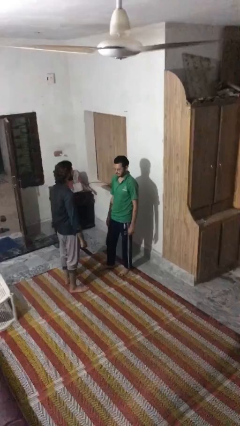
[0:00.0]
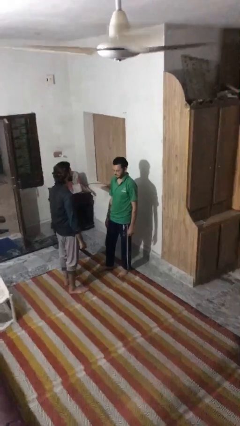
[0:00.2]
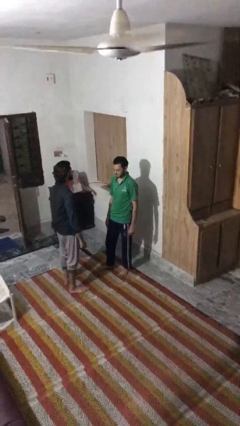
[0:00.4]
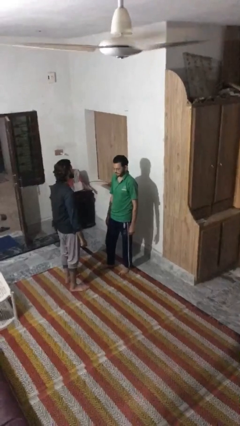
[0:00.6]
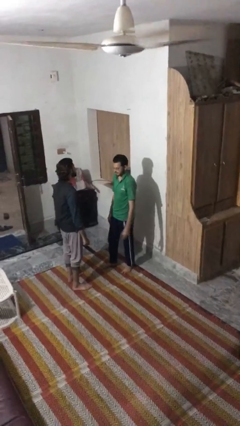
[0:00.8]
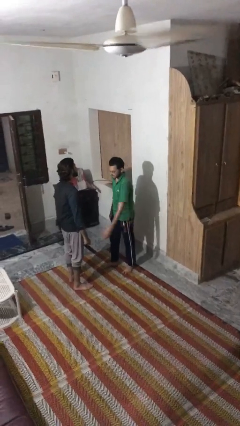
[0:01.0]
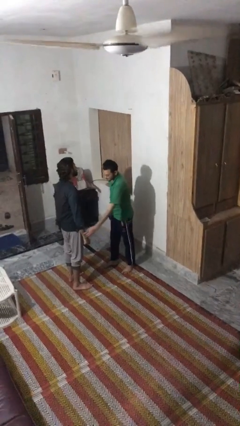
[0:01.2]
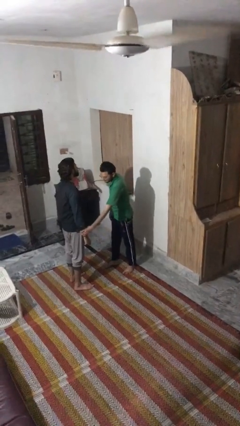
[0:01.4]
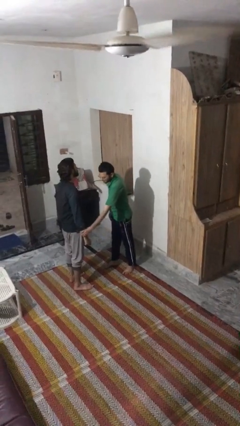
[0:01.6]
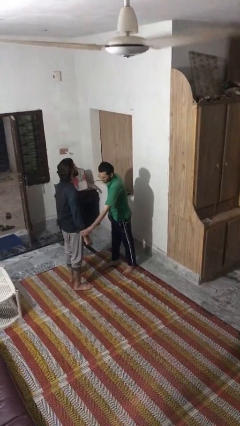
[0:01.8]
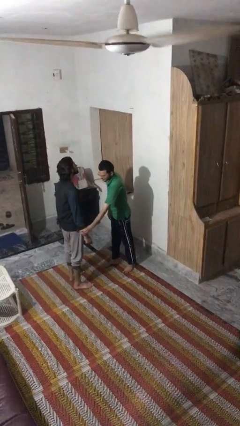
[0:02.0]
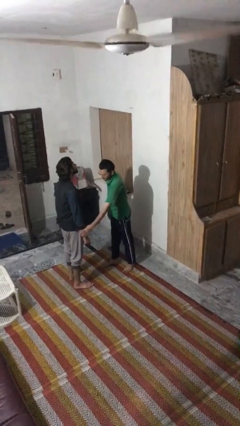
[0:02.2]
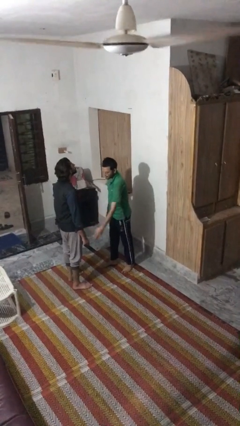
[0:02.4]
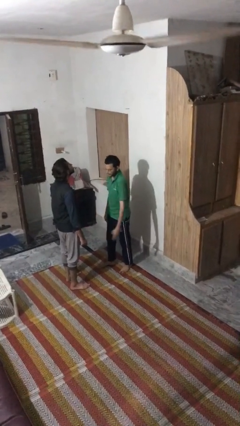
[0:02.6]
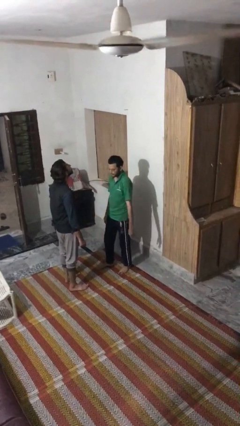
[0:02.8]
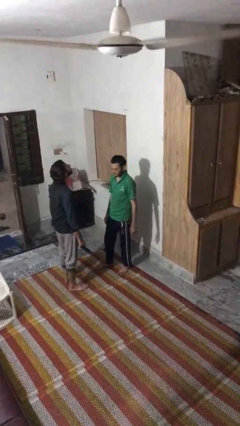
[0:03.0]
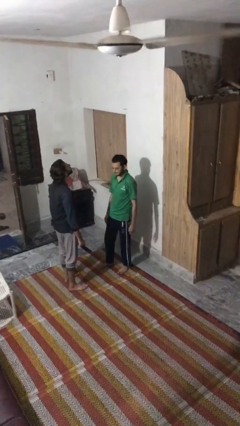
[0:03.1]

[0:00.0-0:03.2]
person grabs person by forearm

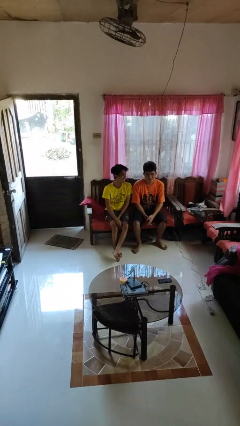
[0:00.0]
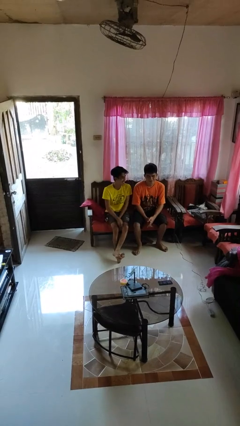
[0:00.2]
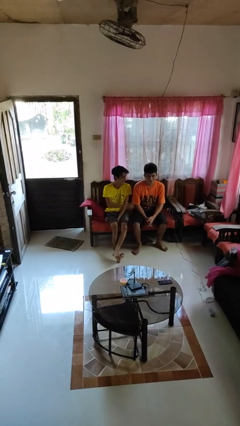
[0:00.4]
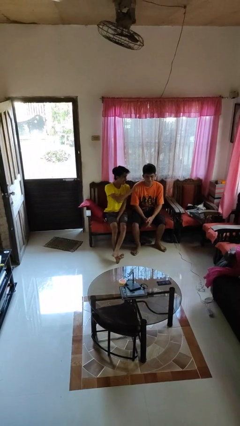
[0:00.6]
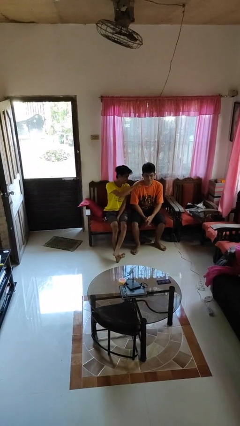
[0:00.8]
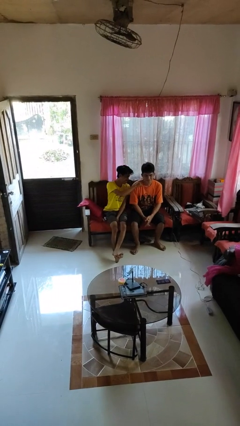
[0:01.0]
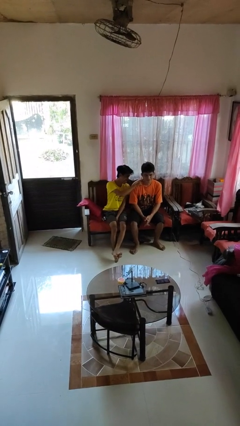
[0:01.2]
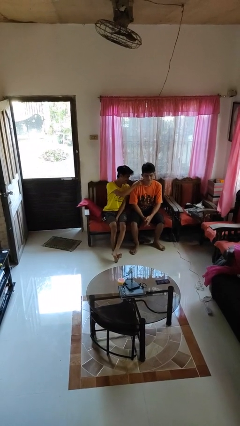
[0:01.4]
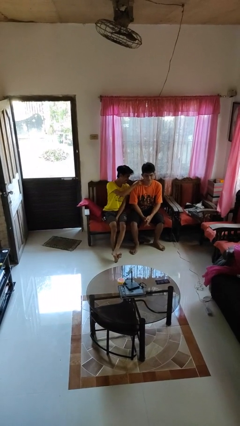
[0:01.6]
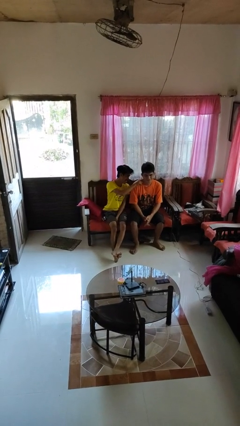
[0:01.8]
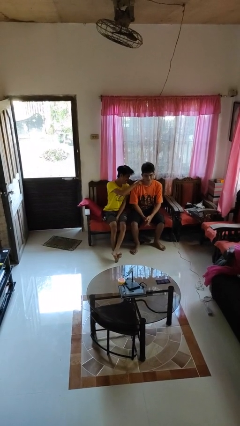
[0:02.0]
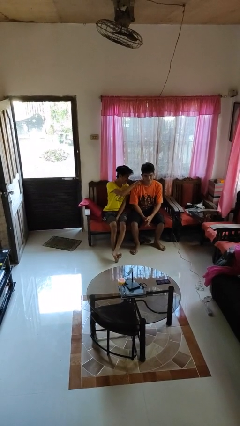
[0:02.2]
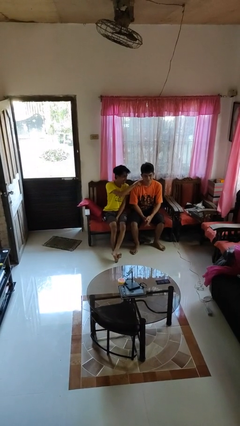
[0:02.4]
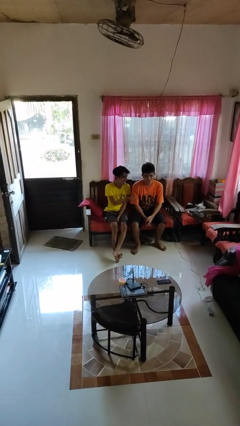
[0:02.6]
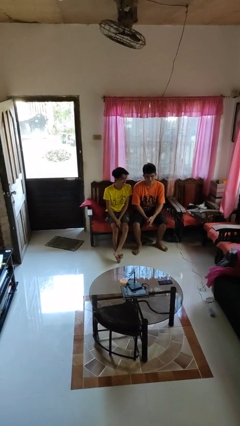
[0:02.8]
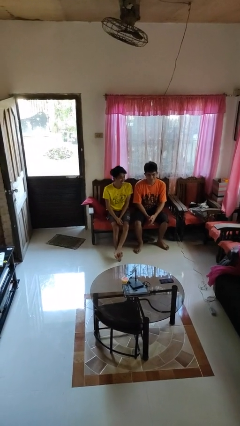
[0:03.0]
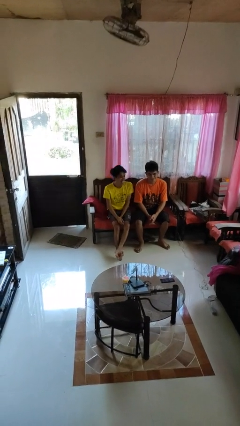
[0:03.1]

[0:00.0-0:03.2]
person touches face of person

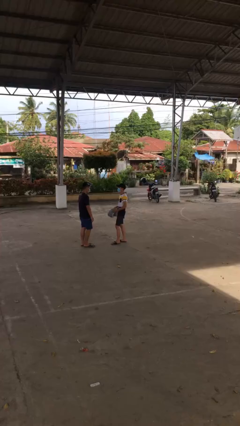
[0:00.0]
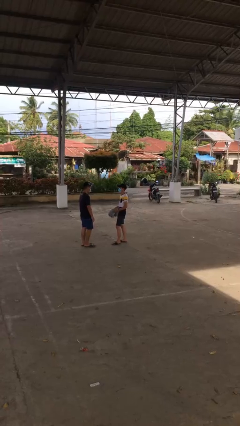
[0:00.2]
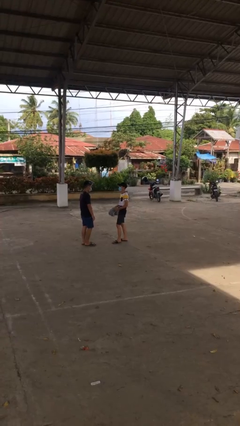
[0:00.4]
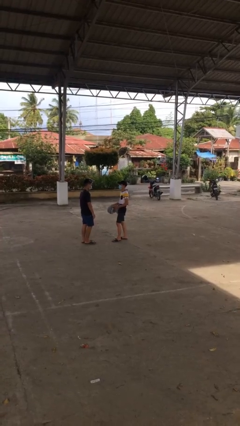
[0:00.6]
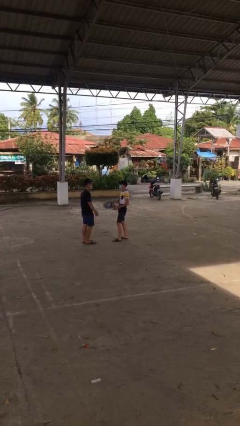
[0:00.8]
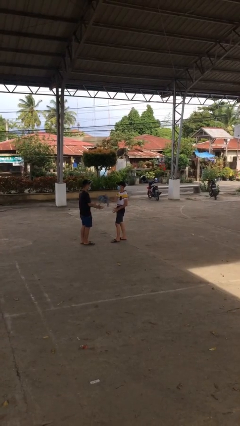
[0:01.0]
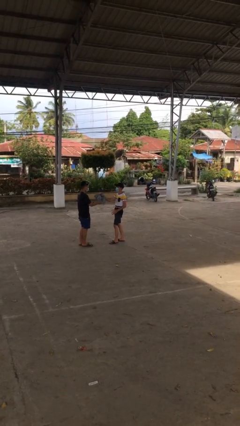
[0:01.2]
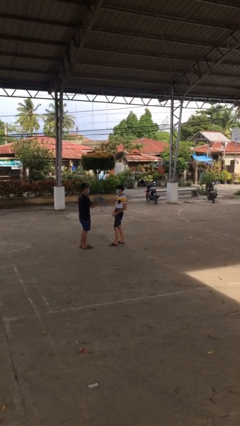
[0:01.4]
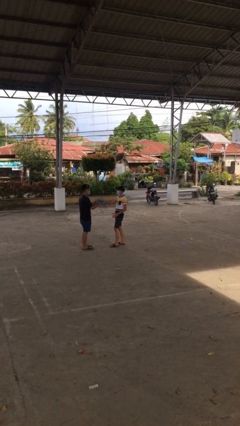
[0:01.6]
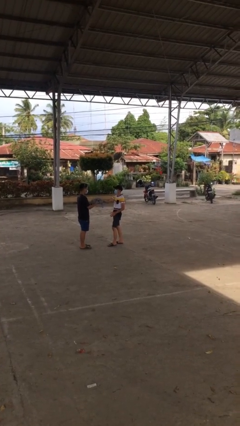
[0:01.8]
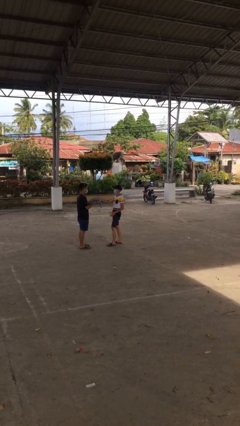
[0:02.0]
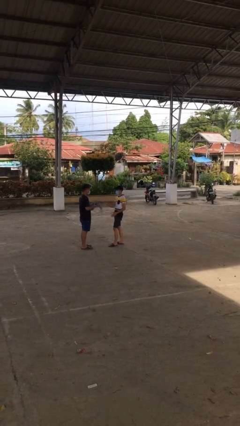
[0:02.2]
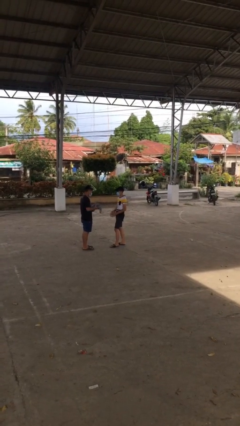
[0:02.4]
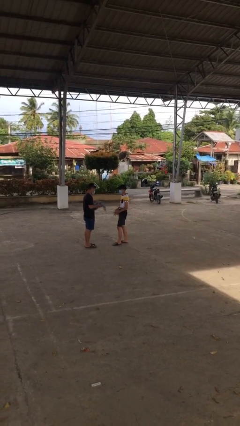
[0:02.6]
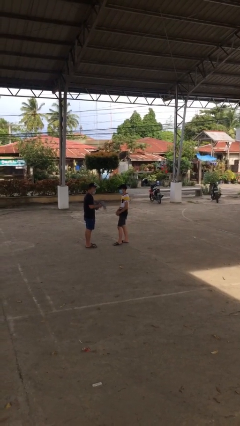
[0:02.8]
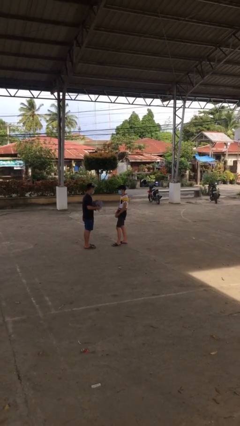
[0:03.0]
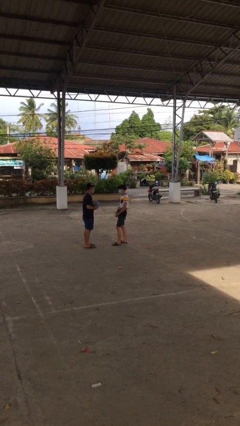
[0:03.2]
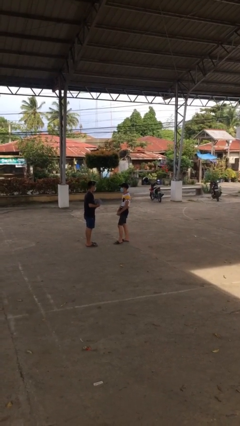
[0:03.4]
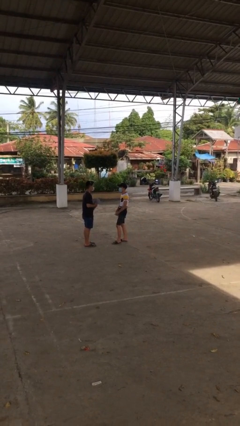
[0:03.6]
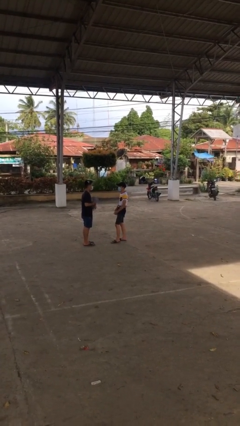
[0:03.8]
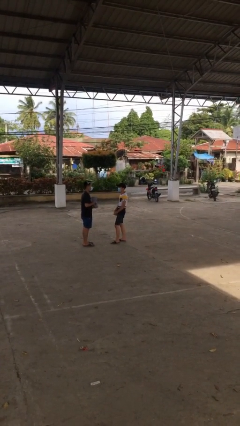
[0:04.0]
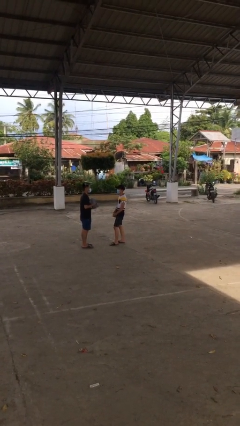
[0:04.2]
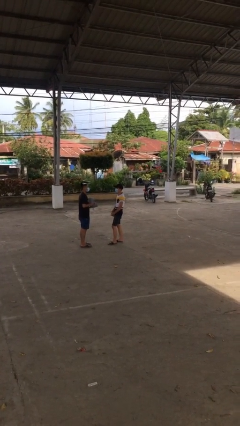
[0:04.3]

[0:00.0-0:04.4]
person transfers object to person

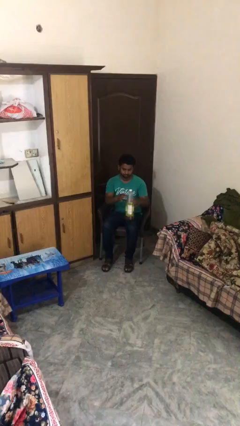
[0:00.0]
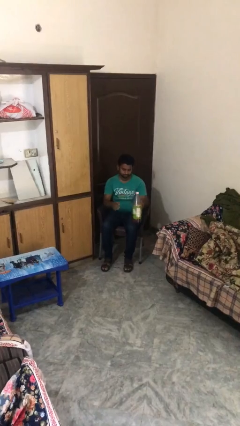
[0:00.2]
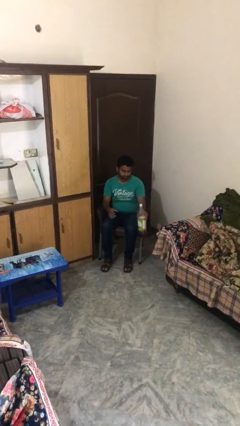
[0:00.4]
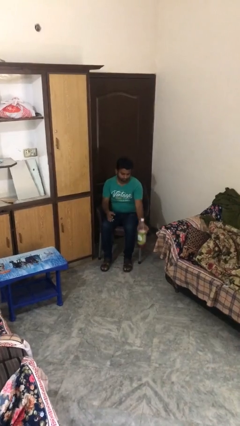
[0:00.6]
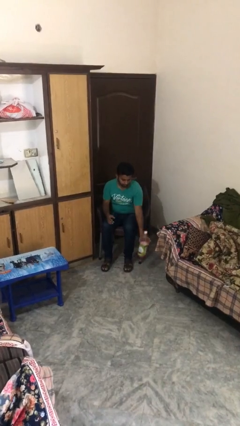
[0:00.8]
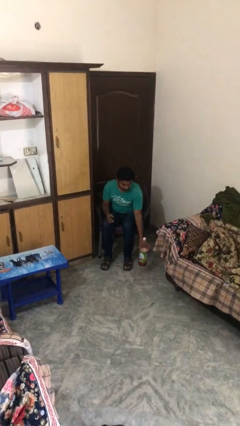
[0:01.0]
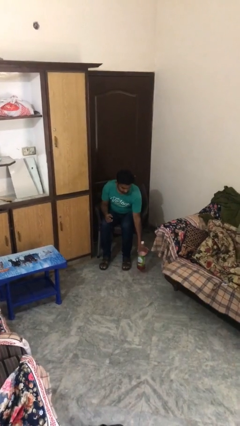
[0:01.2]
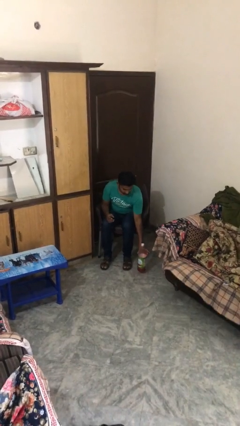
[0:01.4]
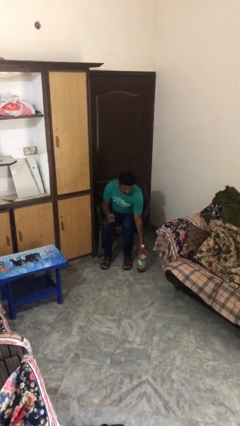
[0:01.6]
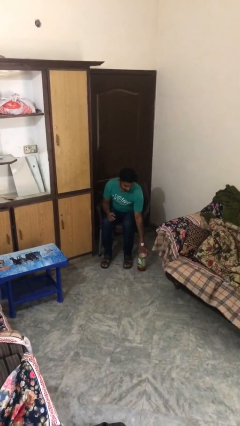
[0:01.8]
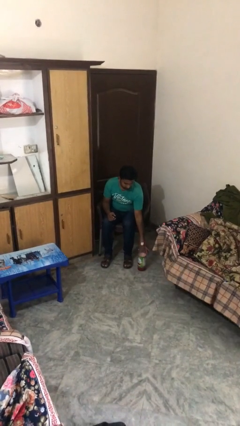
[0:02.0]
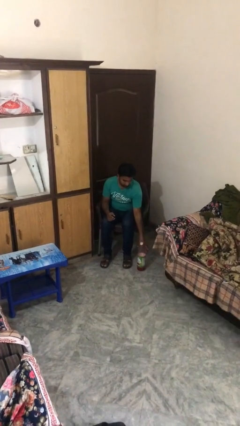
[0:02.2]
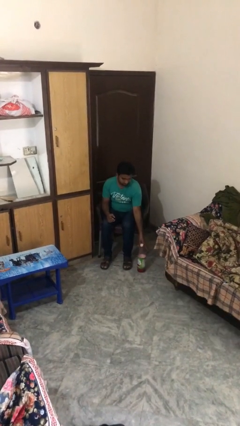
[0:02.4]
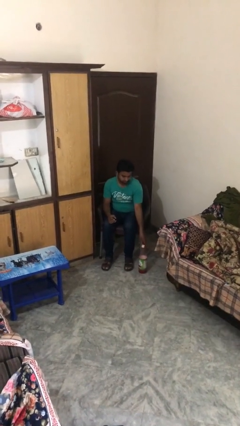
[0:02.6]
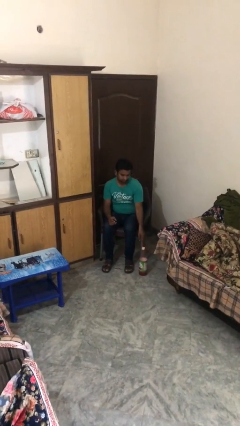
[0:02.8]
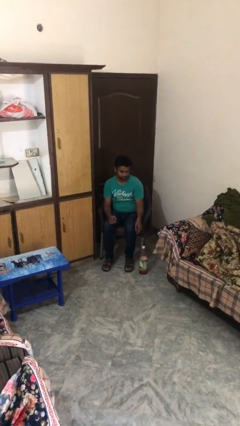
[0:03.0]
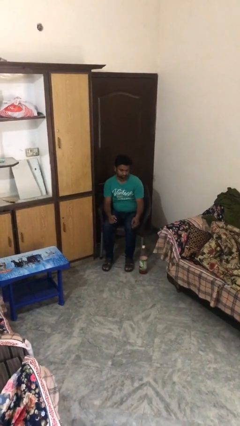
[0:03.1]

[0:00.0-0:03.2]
person puts down object on floor

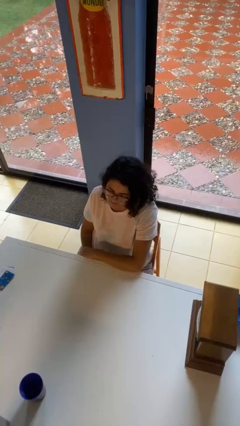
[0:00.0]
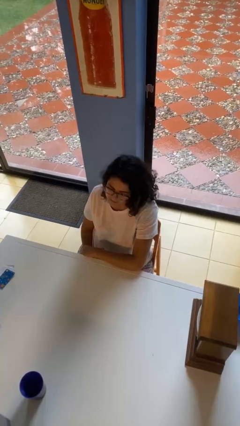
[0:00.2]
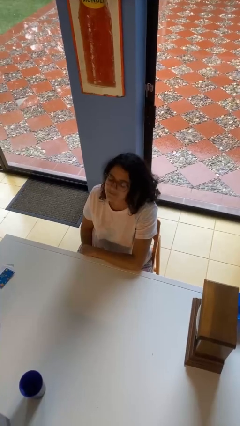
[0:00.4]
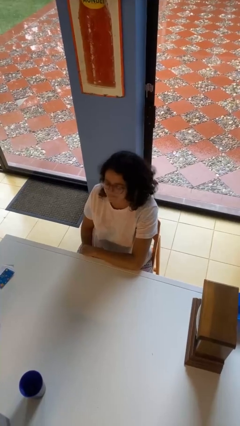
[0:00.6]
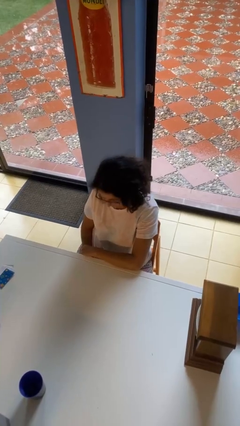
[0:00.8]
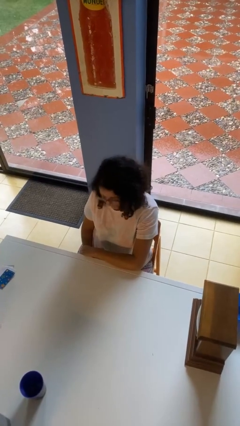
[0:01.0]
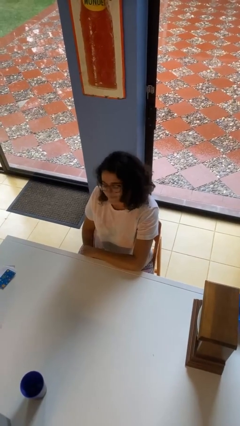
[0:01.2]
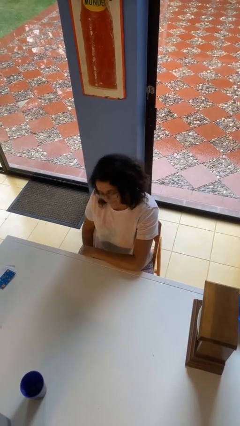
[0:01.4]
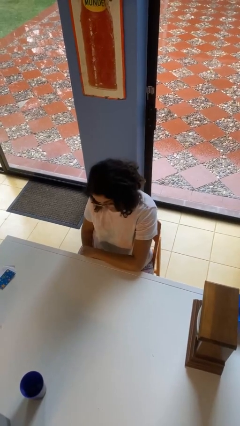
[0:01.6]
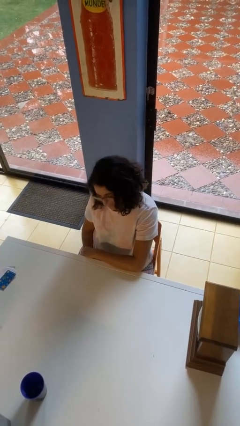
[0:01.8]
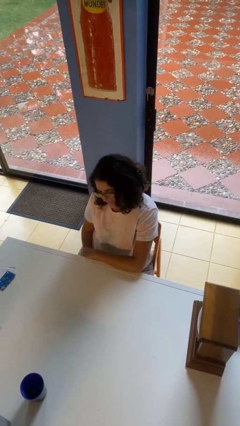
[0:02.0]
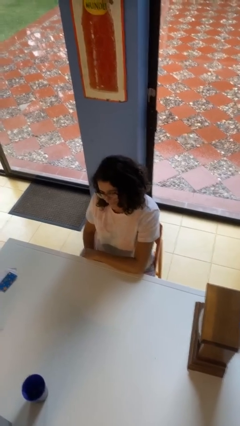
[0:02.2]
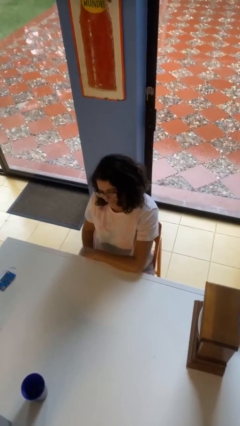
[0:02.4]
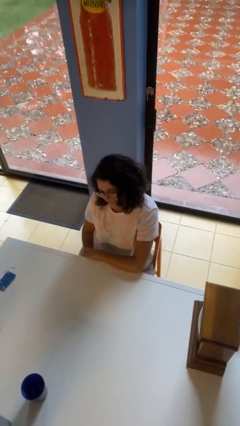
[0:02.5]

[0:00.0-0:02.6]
person nods head

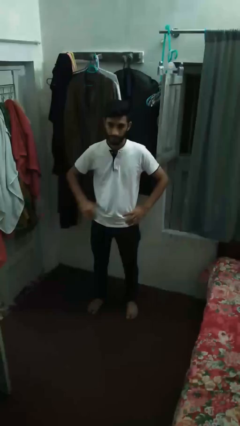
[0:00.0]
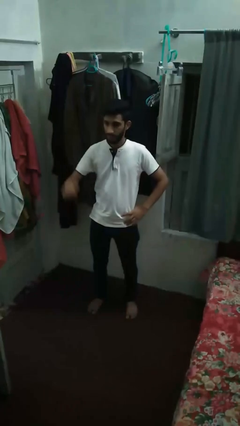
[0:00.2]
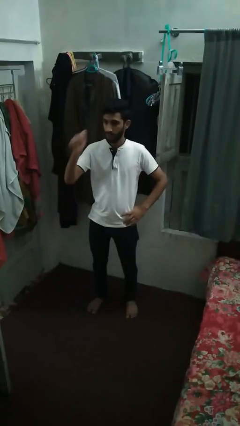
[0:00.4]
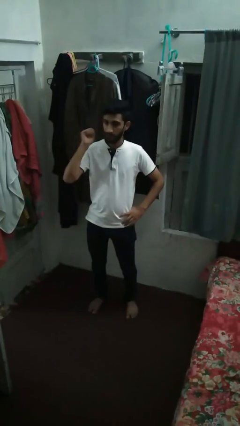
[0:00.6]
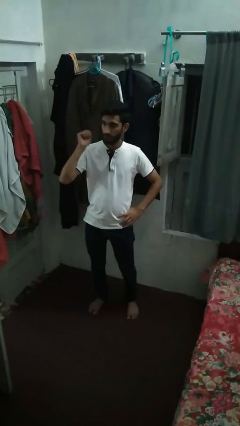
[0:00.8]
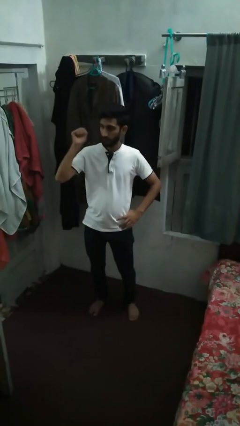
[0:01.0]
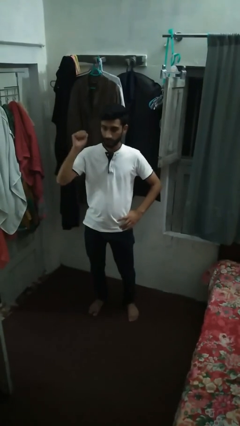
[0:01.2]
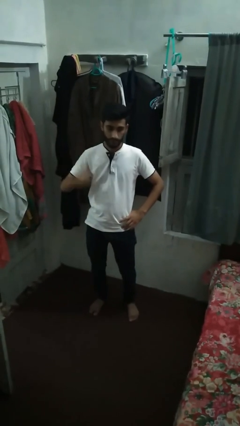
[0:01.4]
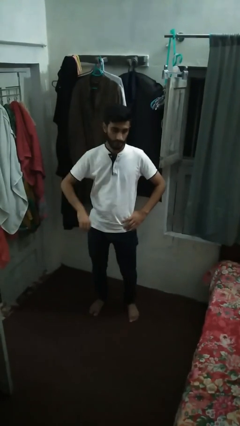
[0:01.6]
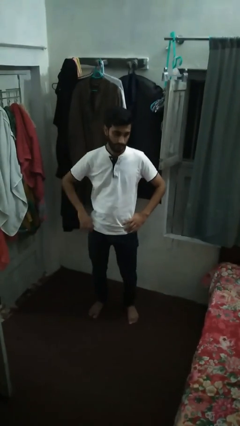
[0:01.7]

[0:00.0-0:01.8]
person gestures behind me
